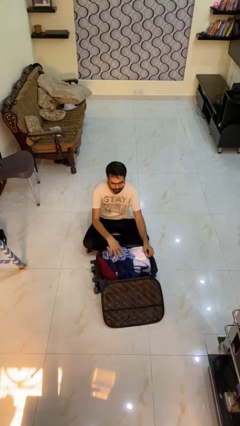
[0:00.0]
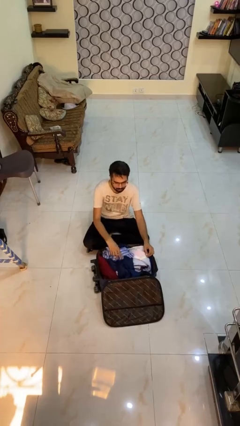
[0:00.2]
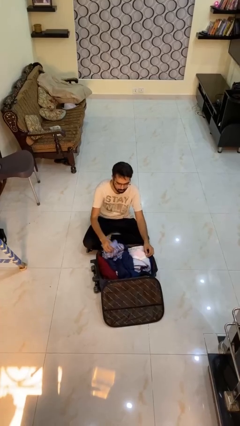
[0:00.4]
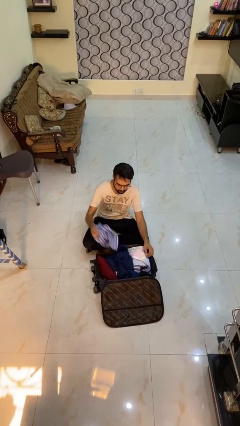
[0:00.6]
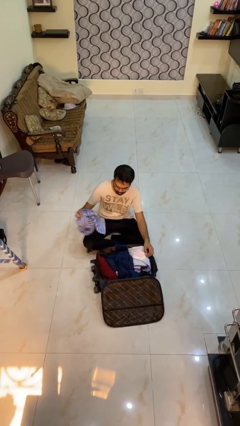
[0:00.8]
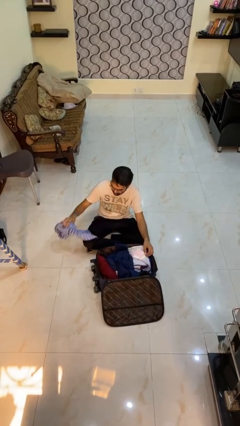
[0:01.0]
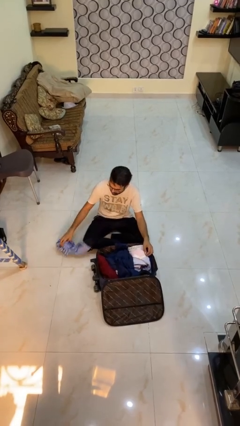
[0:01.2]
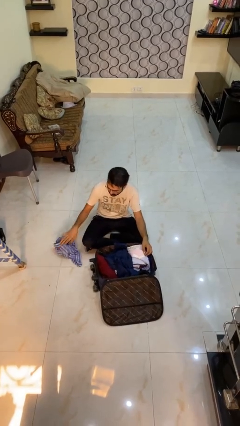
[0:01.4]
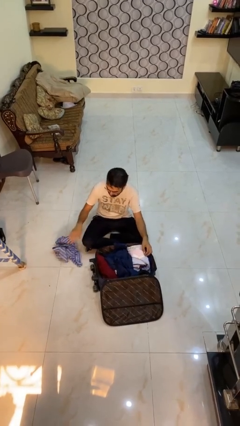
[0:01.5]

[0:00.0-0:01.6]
person unloads clothes from suitcase

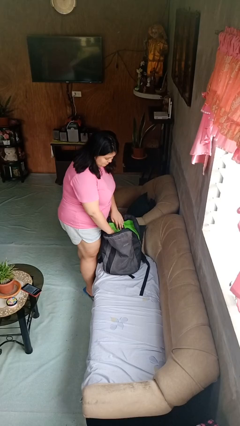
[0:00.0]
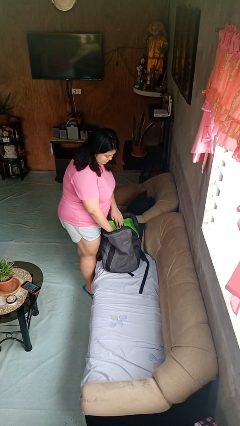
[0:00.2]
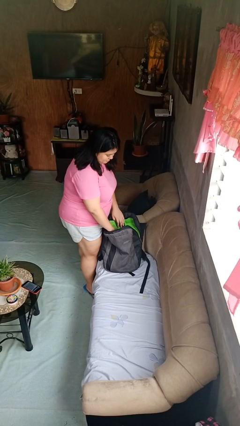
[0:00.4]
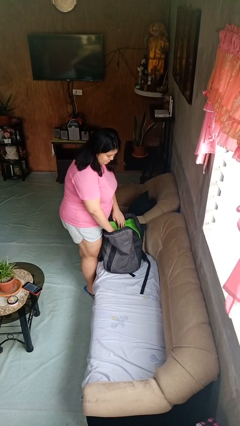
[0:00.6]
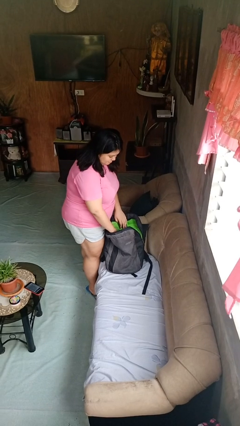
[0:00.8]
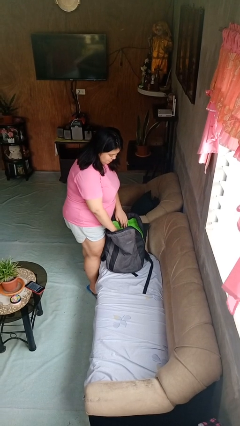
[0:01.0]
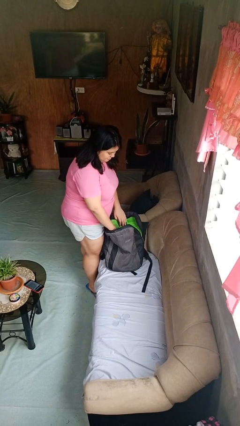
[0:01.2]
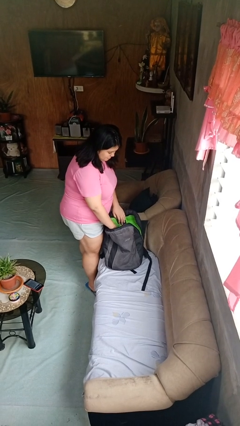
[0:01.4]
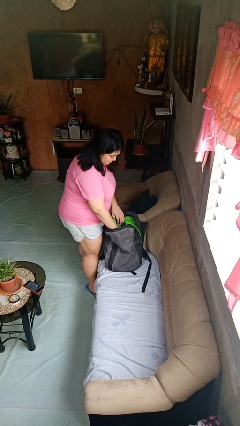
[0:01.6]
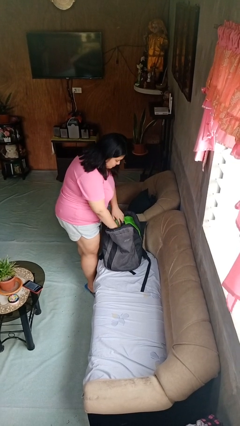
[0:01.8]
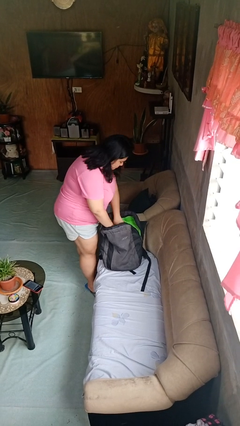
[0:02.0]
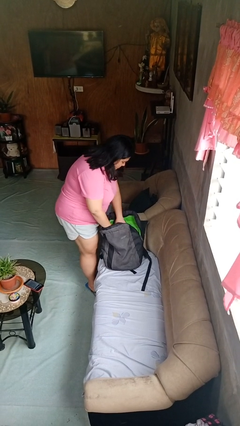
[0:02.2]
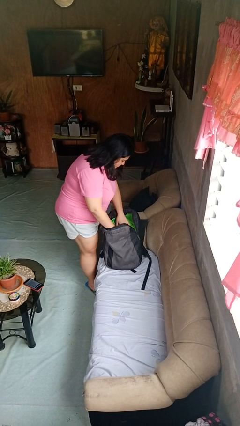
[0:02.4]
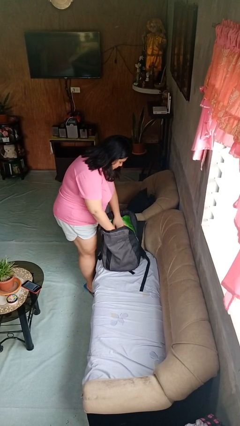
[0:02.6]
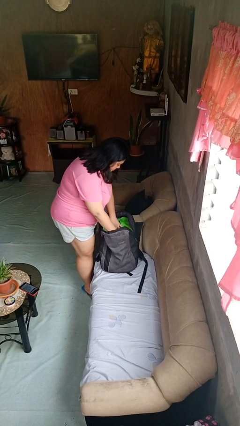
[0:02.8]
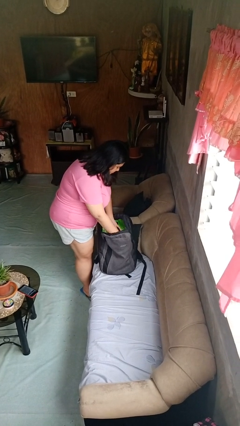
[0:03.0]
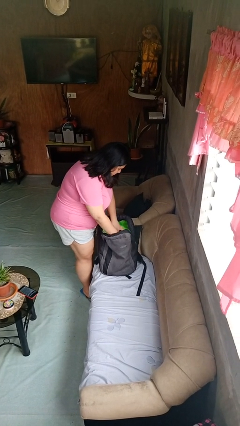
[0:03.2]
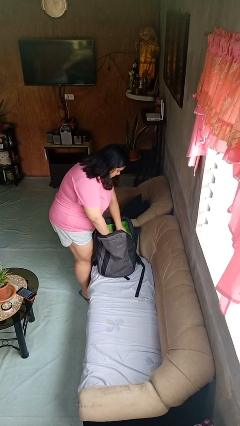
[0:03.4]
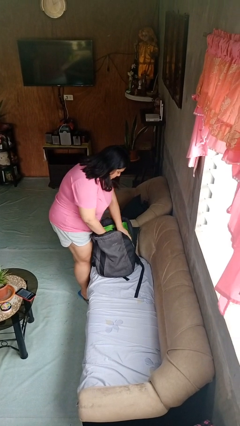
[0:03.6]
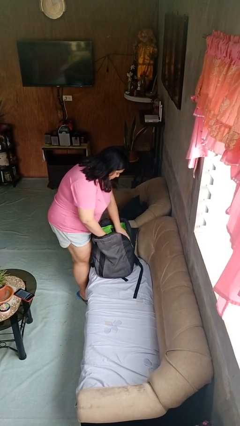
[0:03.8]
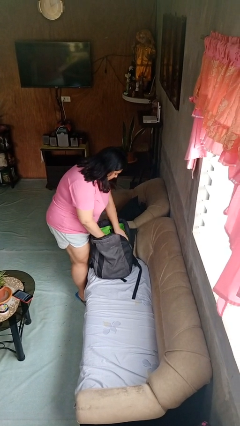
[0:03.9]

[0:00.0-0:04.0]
person searches in backpack

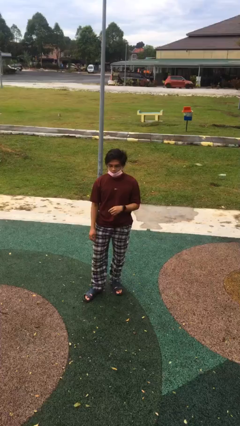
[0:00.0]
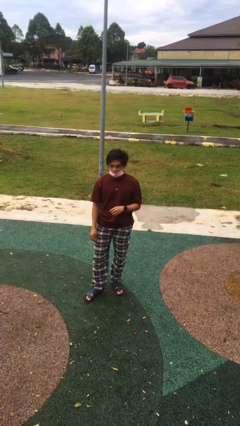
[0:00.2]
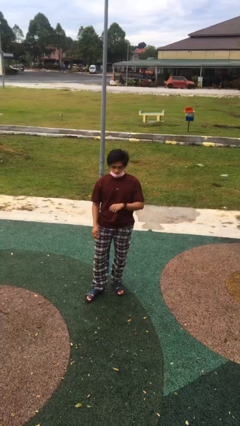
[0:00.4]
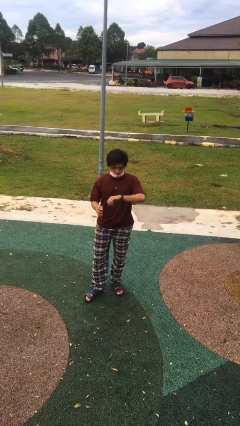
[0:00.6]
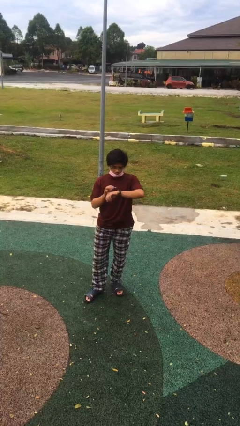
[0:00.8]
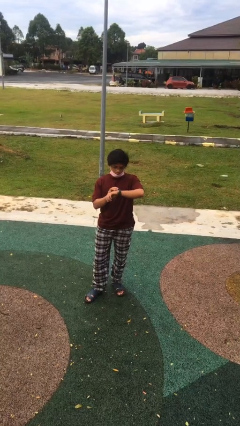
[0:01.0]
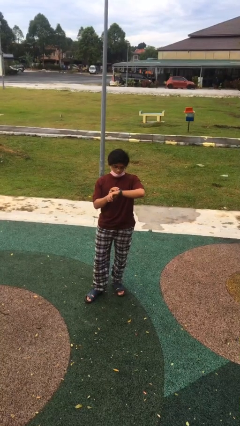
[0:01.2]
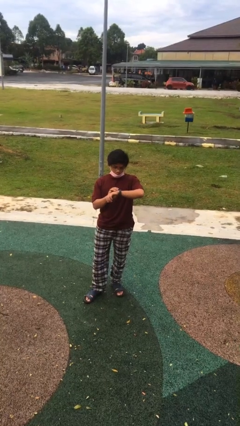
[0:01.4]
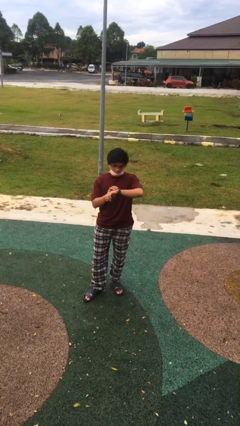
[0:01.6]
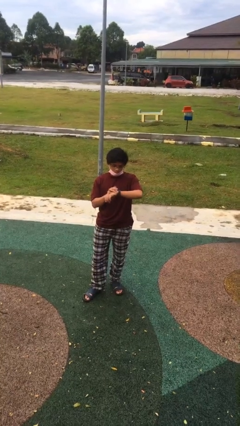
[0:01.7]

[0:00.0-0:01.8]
person looks at wristwatch

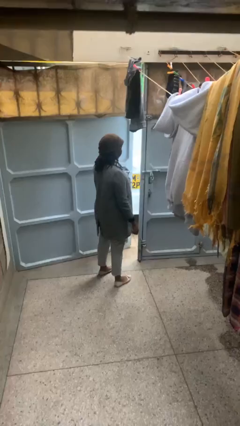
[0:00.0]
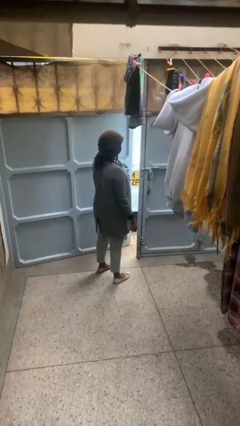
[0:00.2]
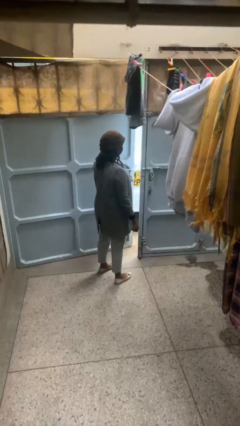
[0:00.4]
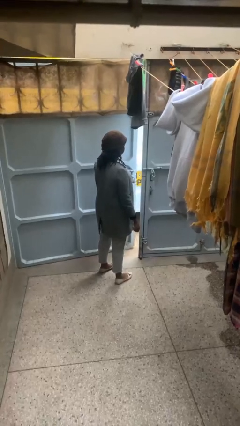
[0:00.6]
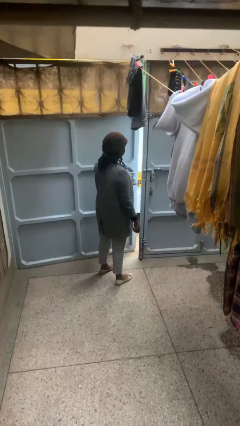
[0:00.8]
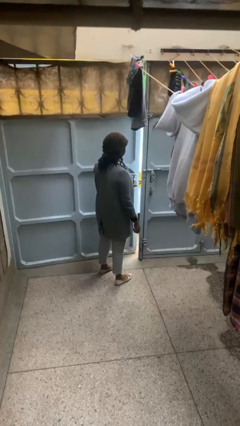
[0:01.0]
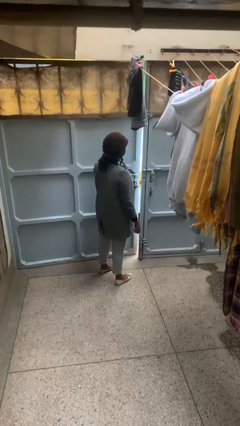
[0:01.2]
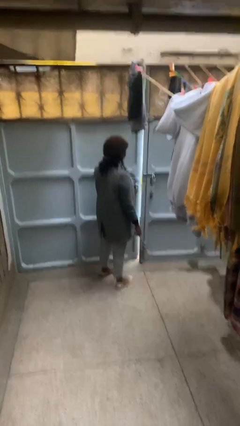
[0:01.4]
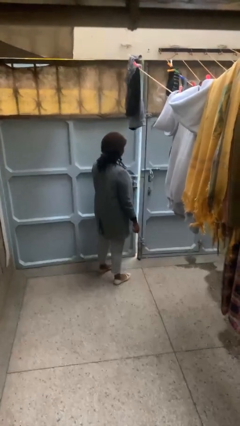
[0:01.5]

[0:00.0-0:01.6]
person closes gate

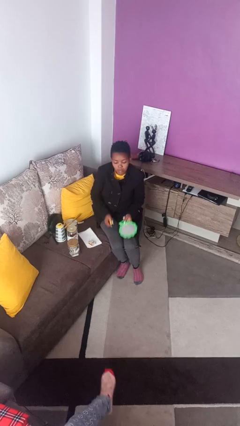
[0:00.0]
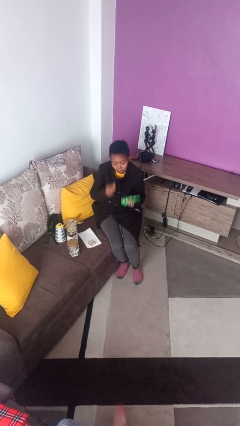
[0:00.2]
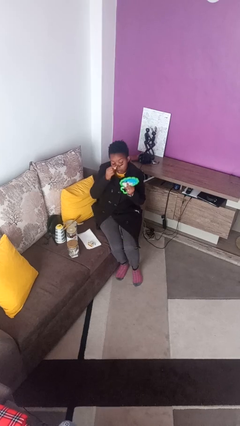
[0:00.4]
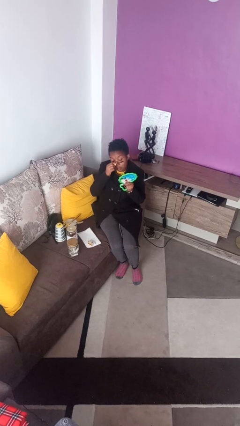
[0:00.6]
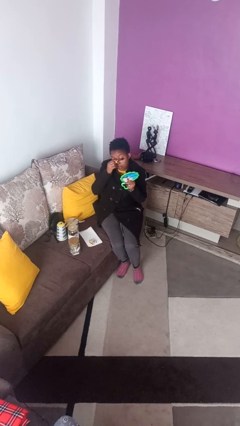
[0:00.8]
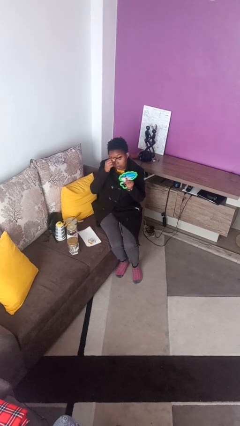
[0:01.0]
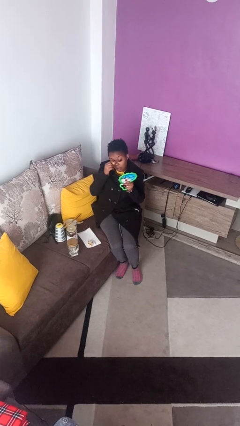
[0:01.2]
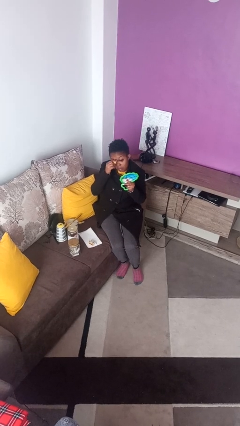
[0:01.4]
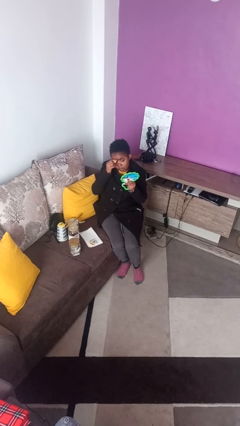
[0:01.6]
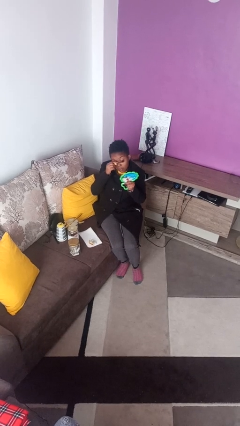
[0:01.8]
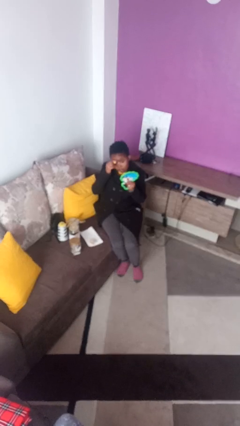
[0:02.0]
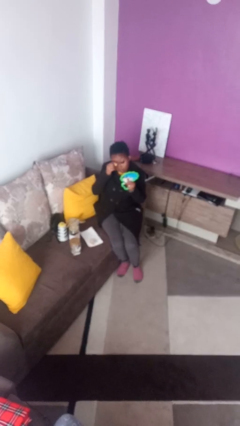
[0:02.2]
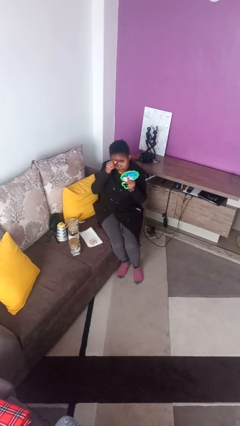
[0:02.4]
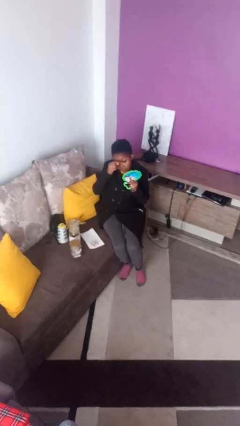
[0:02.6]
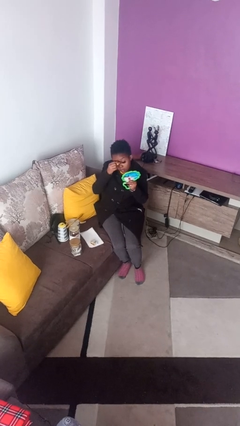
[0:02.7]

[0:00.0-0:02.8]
person applies eye makeup

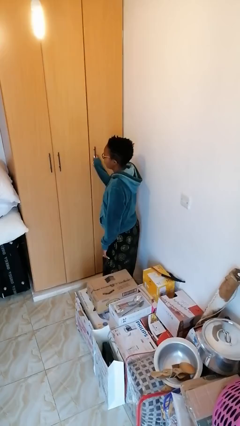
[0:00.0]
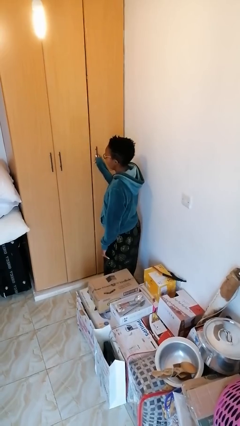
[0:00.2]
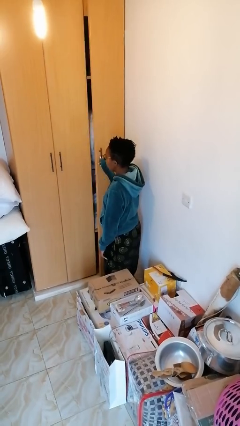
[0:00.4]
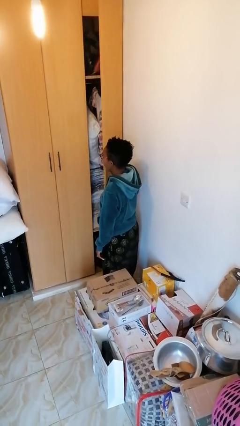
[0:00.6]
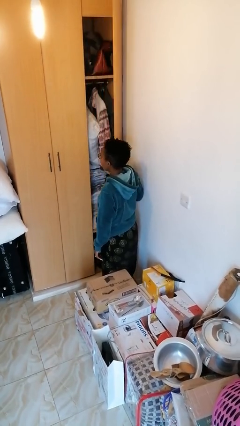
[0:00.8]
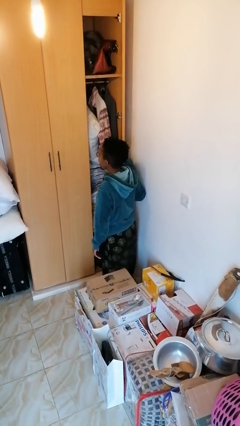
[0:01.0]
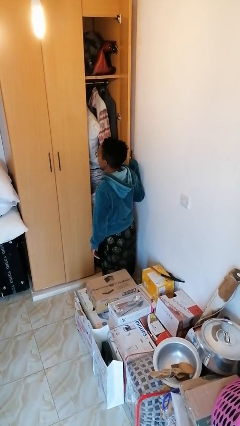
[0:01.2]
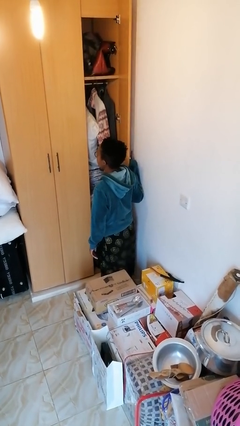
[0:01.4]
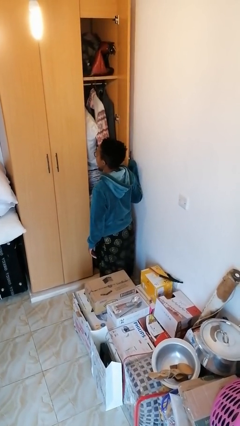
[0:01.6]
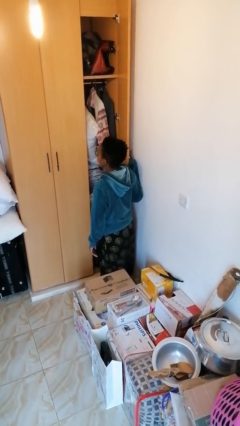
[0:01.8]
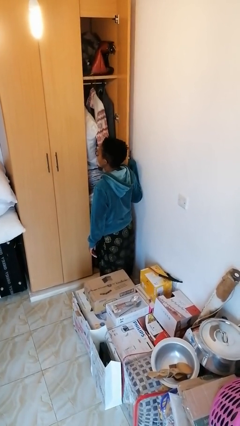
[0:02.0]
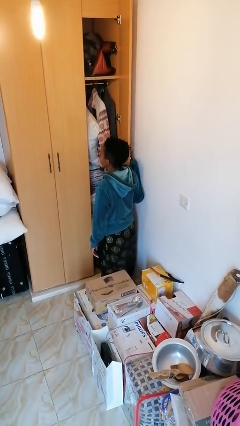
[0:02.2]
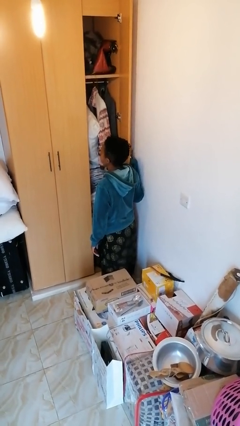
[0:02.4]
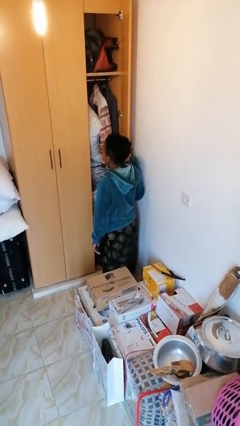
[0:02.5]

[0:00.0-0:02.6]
person opens closet door

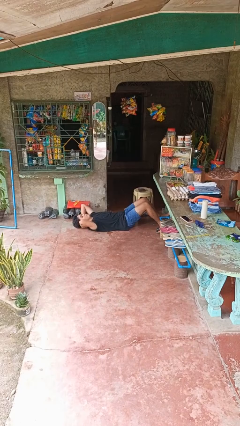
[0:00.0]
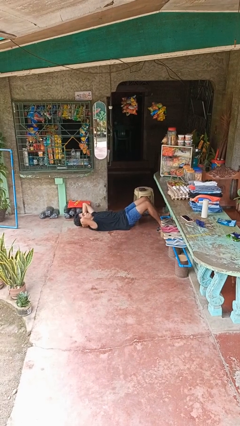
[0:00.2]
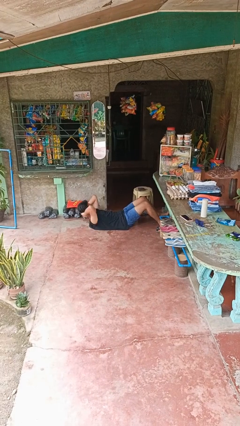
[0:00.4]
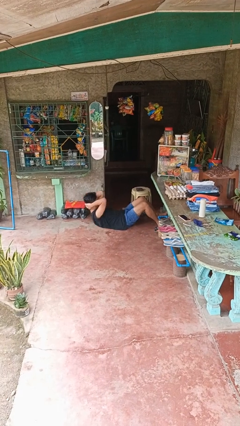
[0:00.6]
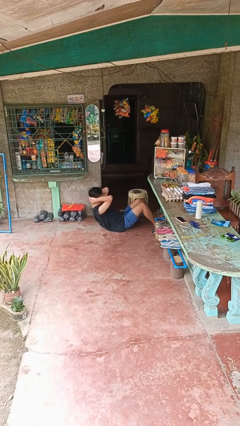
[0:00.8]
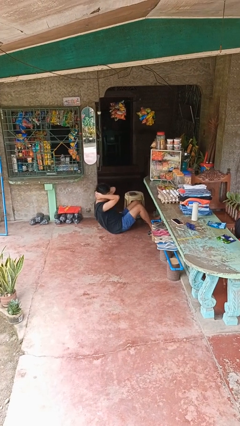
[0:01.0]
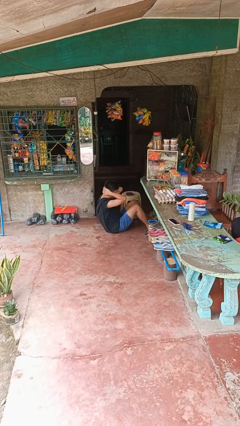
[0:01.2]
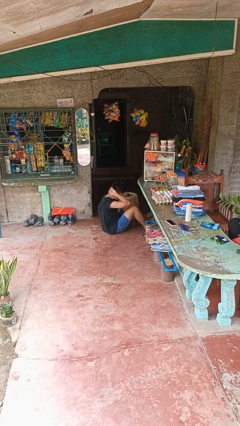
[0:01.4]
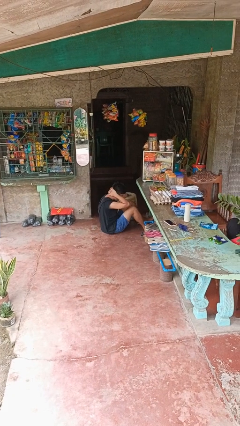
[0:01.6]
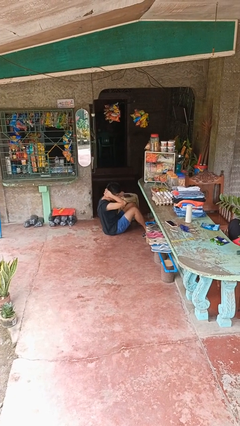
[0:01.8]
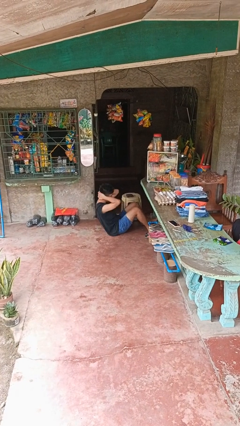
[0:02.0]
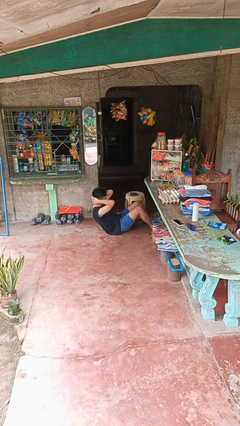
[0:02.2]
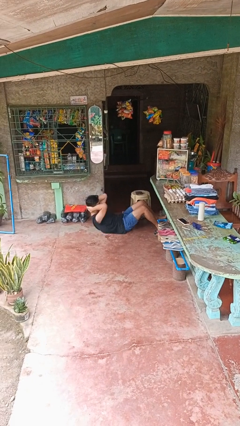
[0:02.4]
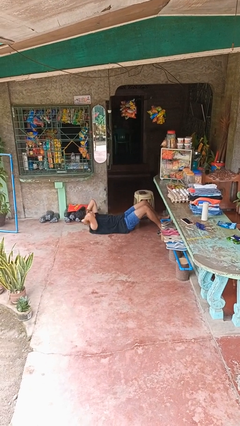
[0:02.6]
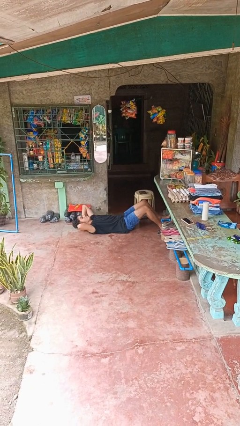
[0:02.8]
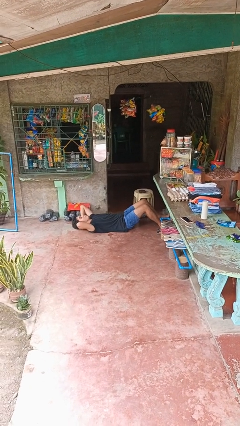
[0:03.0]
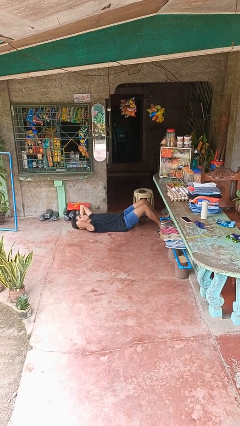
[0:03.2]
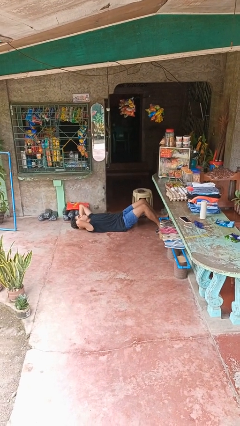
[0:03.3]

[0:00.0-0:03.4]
person exercises with situp
